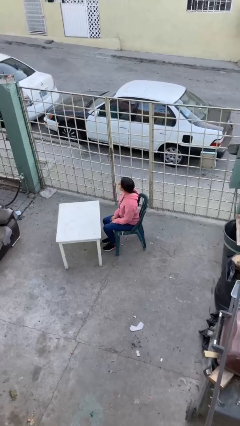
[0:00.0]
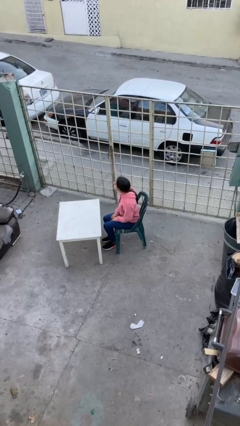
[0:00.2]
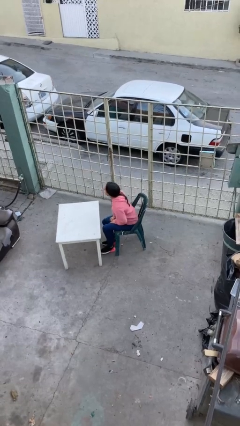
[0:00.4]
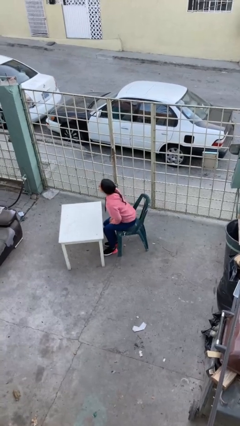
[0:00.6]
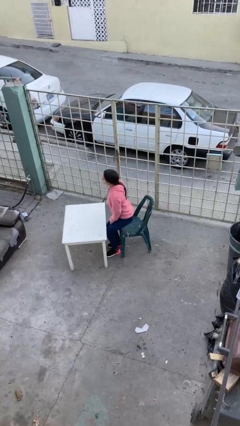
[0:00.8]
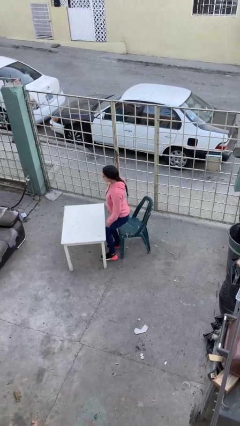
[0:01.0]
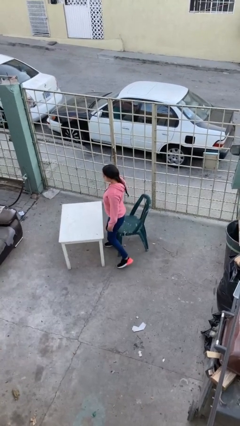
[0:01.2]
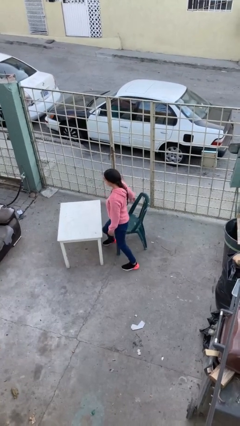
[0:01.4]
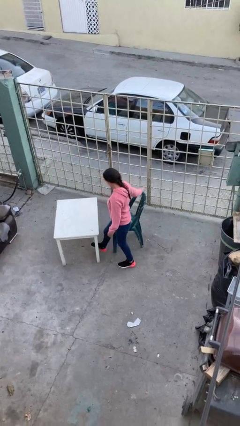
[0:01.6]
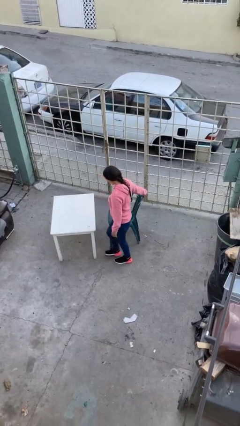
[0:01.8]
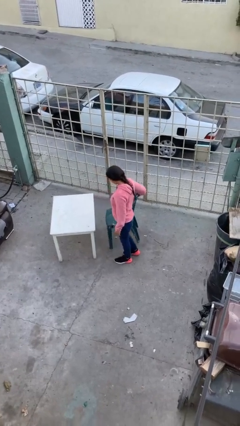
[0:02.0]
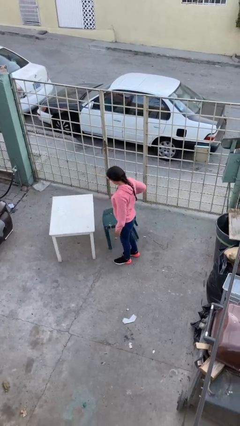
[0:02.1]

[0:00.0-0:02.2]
person stands up

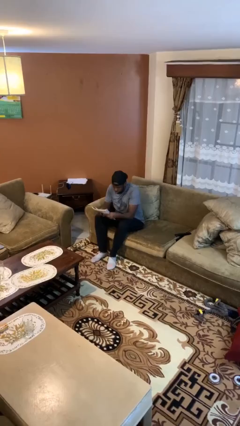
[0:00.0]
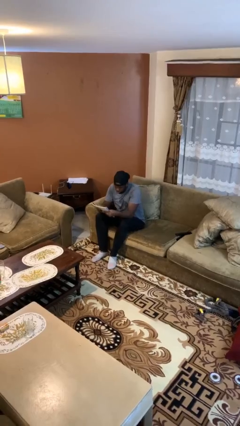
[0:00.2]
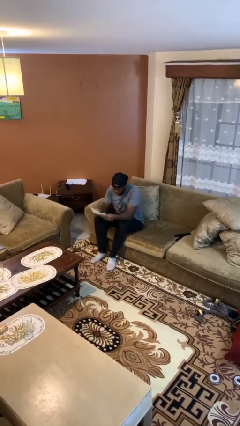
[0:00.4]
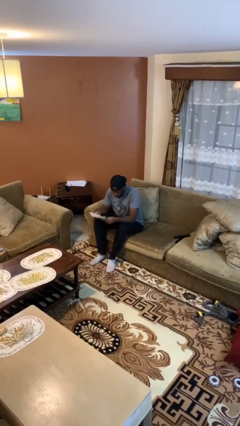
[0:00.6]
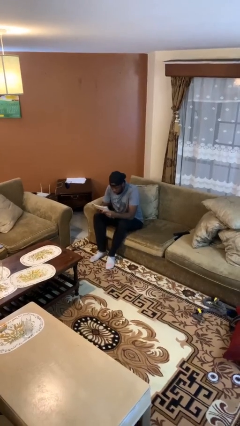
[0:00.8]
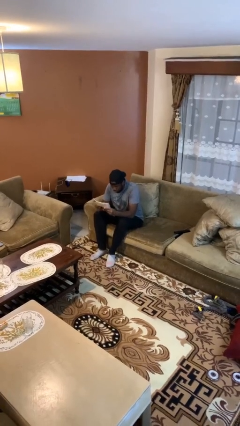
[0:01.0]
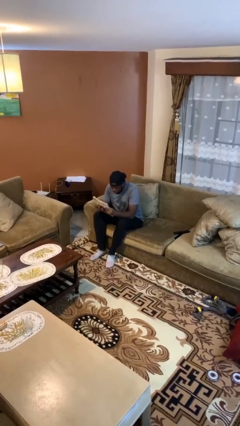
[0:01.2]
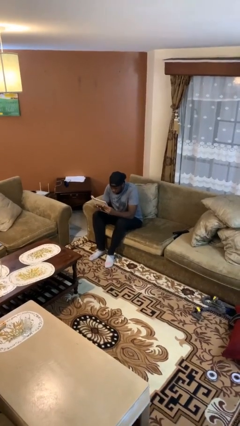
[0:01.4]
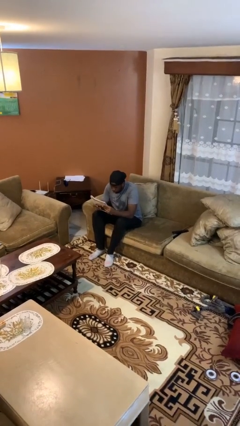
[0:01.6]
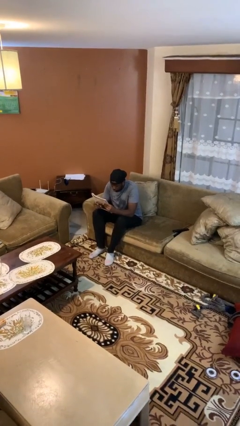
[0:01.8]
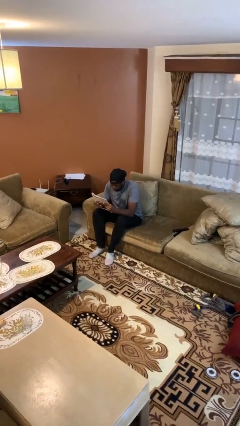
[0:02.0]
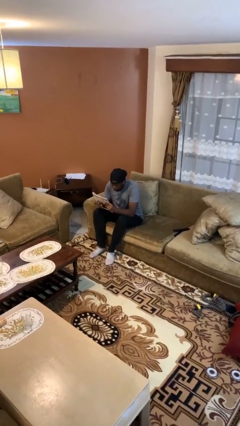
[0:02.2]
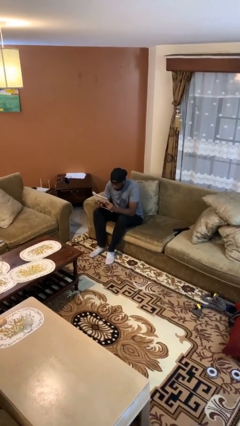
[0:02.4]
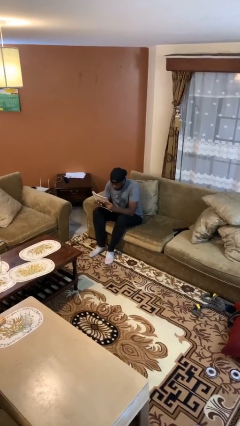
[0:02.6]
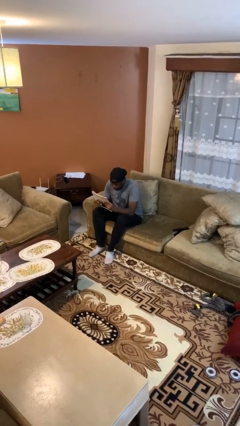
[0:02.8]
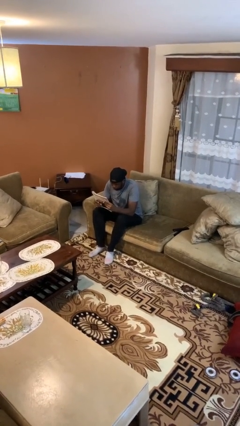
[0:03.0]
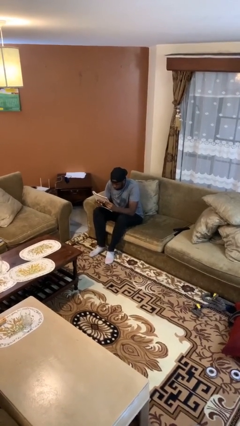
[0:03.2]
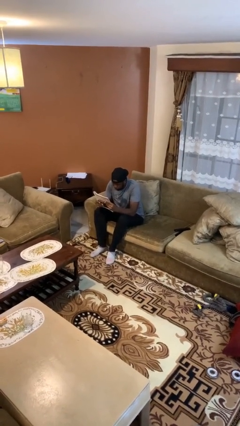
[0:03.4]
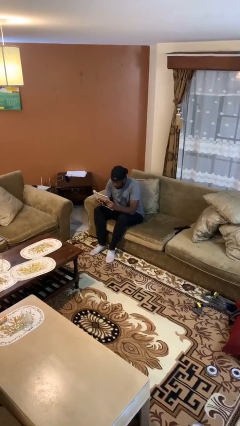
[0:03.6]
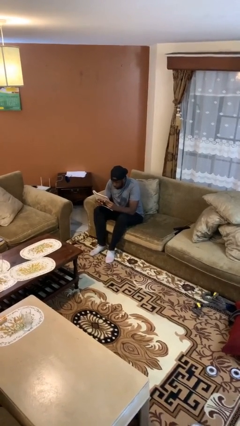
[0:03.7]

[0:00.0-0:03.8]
person reads document

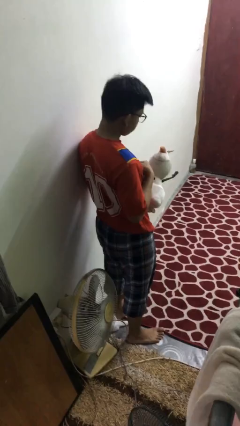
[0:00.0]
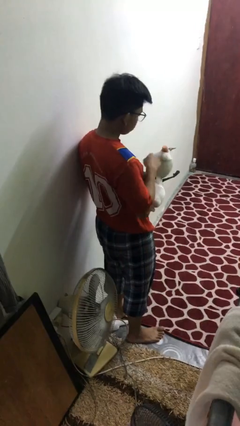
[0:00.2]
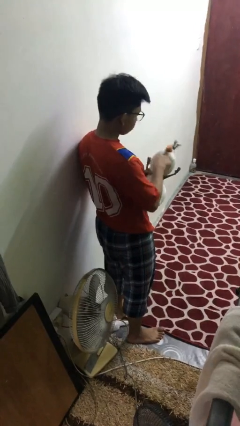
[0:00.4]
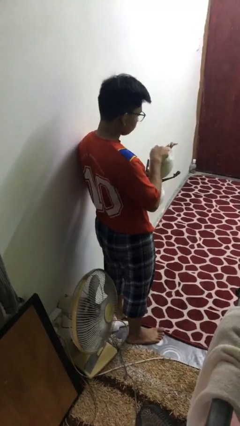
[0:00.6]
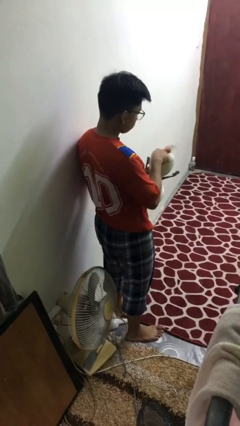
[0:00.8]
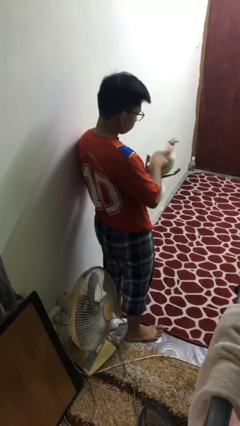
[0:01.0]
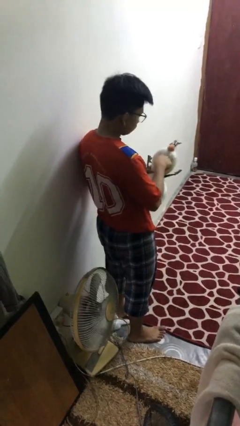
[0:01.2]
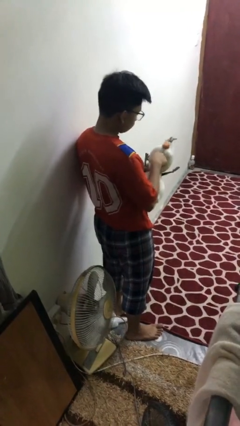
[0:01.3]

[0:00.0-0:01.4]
person taps object with finger

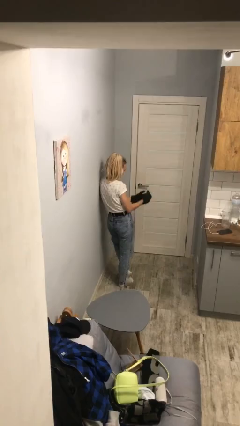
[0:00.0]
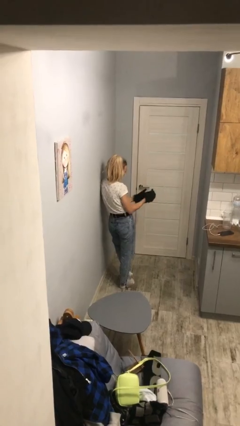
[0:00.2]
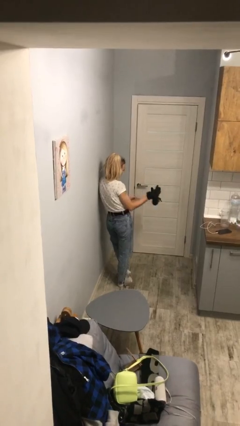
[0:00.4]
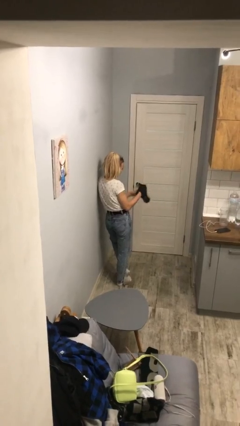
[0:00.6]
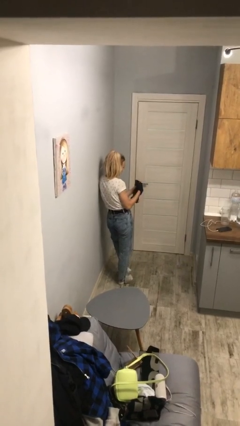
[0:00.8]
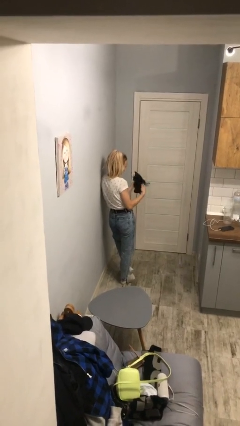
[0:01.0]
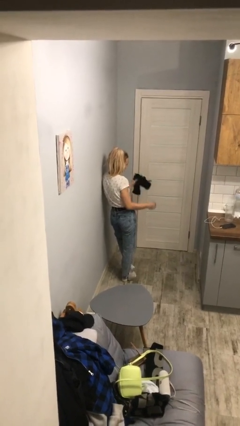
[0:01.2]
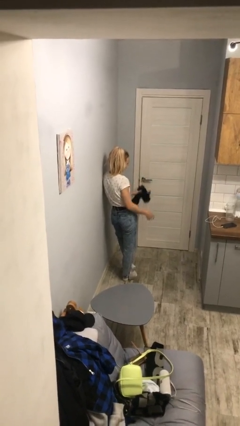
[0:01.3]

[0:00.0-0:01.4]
person takes off gloves

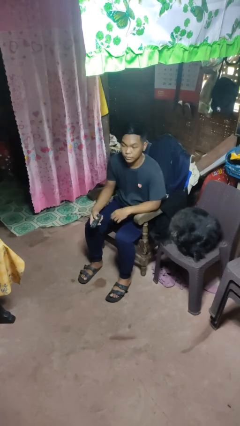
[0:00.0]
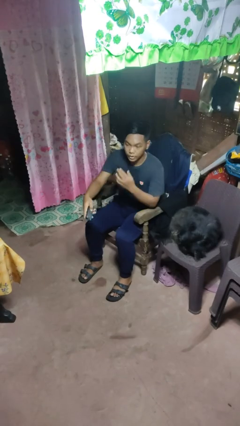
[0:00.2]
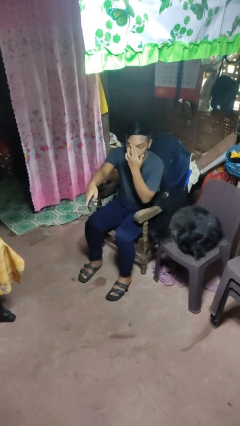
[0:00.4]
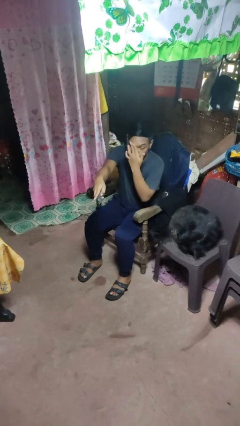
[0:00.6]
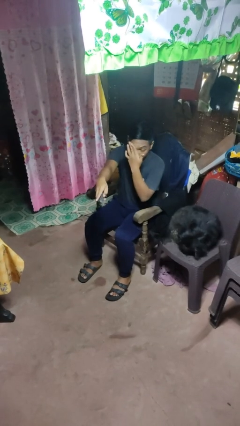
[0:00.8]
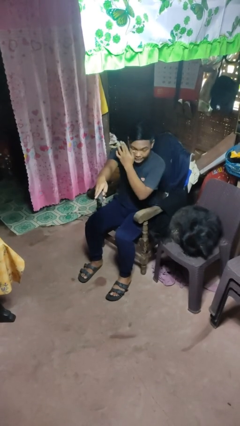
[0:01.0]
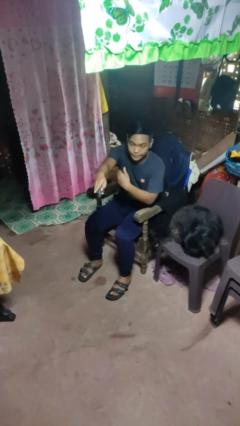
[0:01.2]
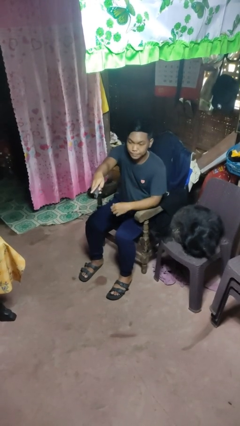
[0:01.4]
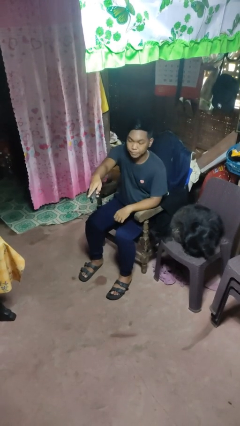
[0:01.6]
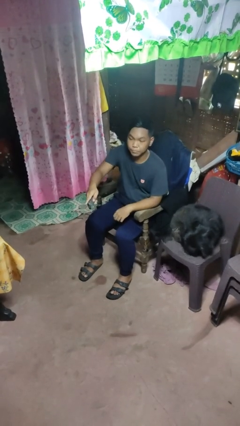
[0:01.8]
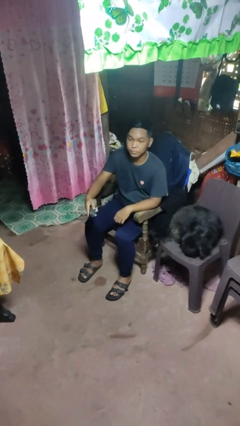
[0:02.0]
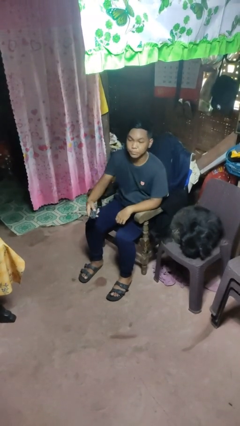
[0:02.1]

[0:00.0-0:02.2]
person uses television remote

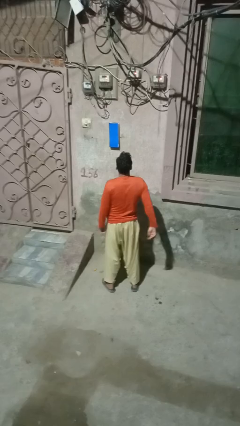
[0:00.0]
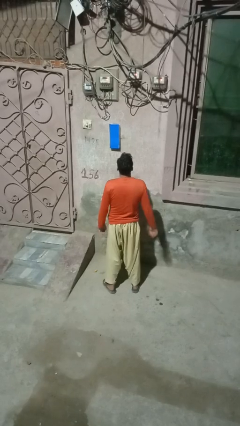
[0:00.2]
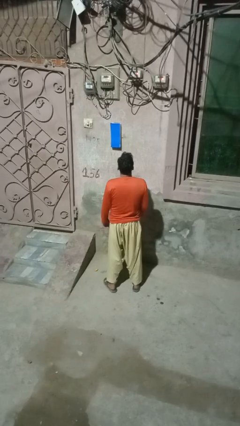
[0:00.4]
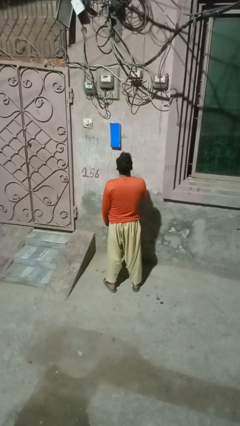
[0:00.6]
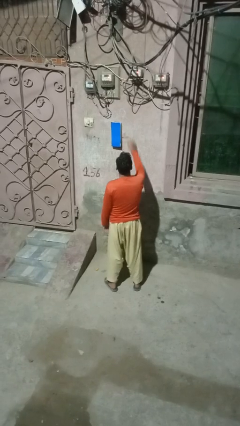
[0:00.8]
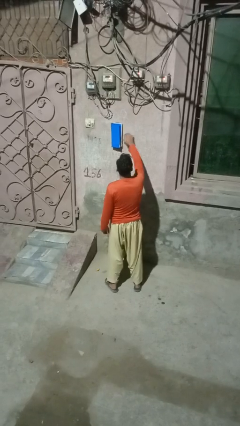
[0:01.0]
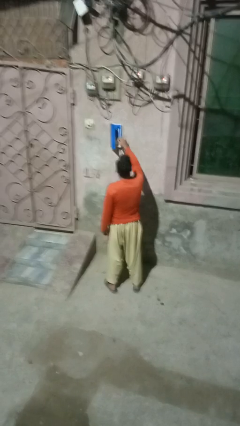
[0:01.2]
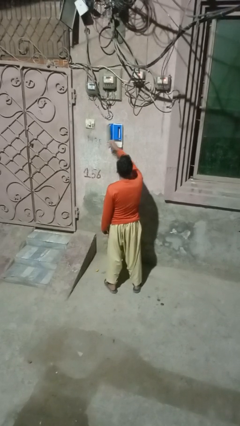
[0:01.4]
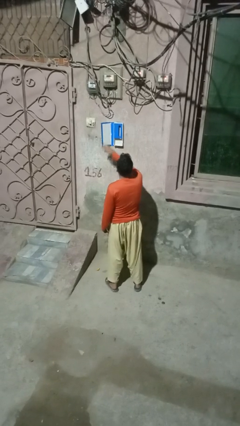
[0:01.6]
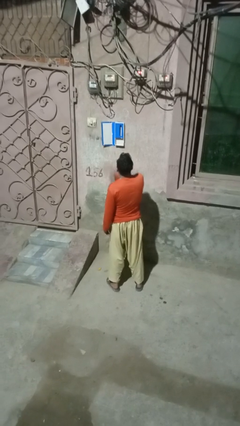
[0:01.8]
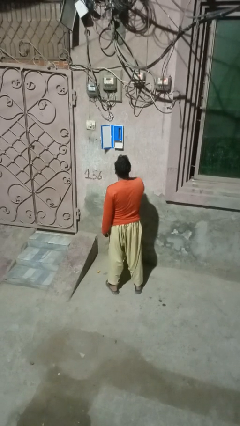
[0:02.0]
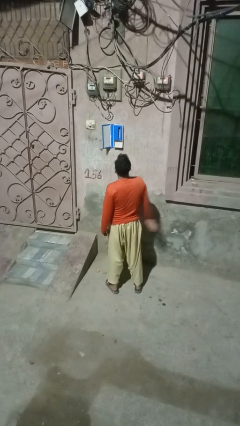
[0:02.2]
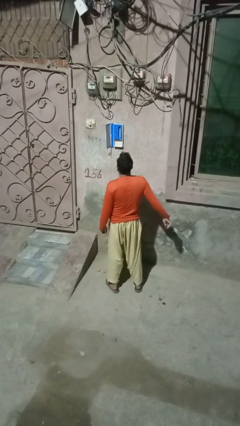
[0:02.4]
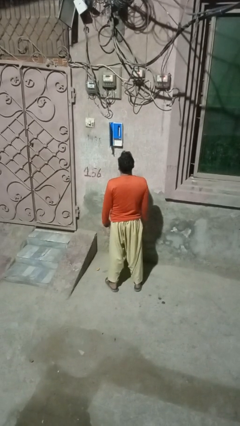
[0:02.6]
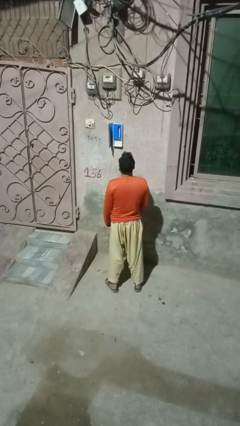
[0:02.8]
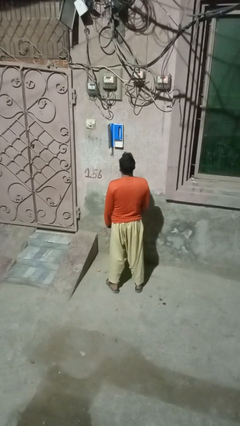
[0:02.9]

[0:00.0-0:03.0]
person opens mailbox

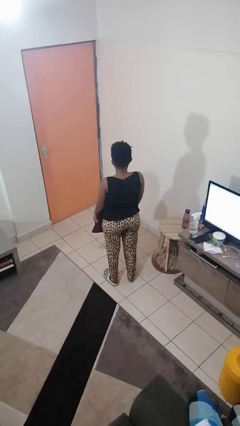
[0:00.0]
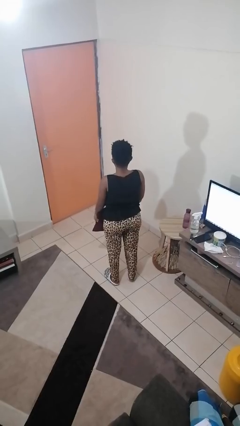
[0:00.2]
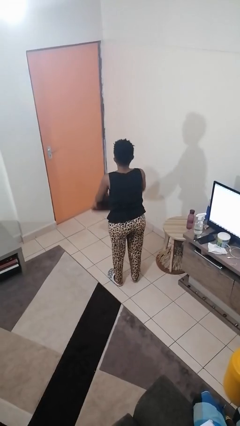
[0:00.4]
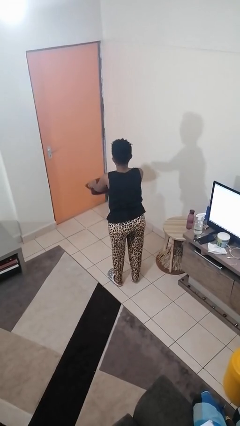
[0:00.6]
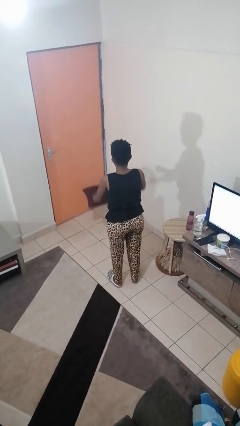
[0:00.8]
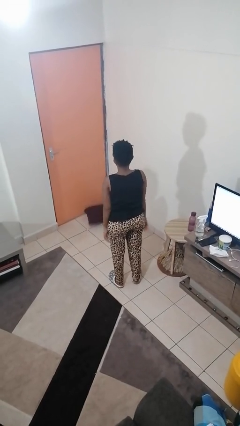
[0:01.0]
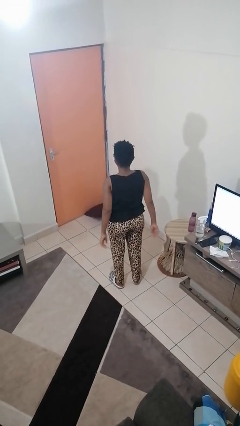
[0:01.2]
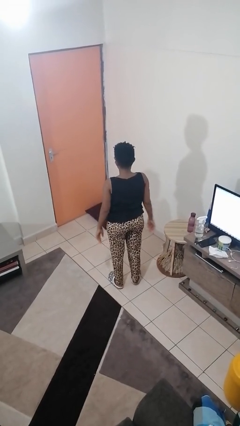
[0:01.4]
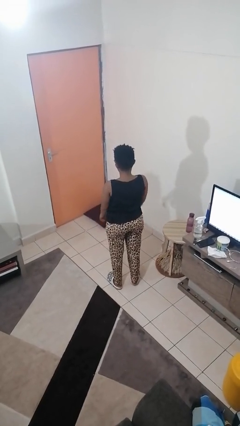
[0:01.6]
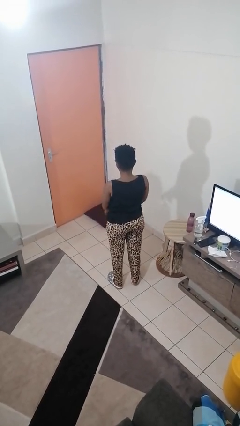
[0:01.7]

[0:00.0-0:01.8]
person throws object to ground

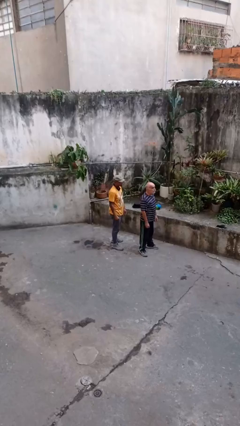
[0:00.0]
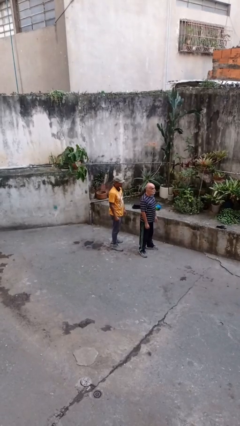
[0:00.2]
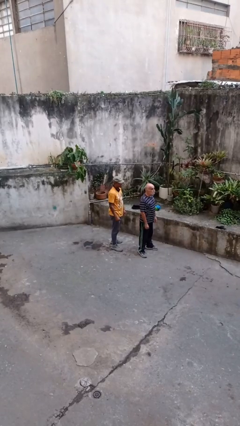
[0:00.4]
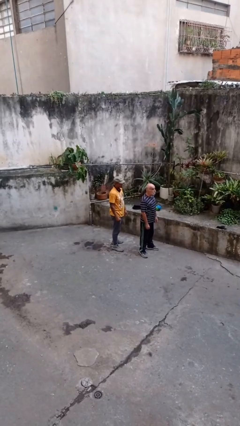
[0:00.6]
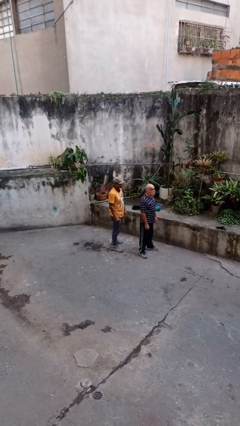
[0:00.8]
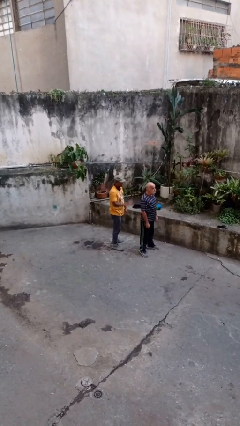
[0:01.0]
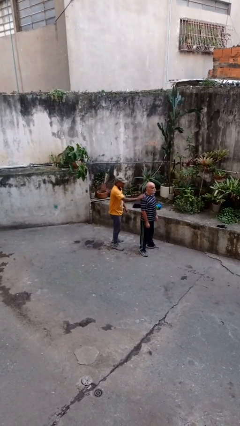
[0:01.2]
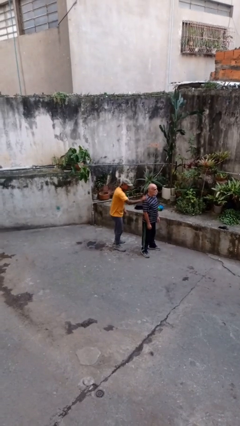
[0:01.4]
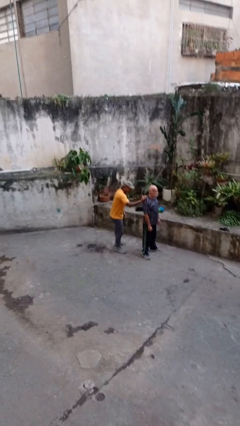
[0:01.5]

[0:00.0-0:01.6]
person grabs person by shoulder
